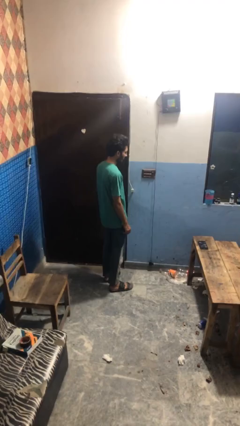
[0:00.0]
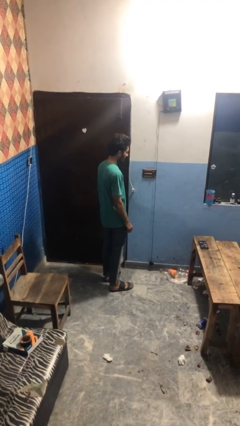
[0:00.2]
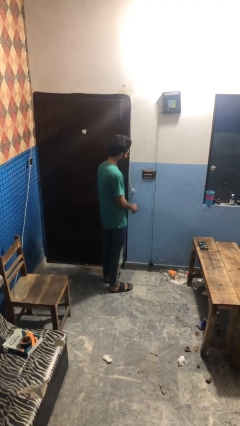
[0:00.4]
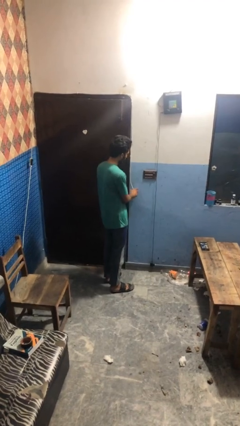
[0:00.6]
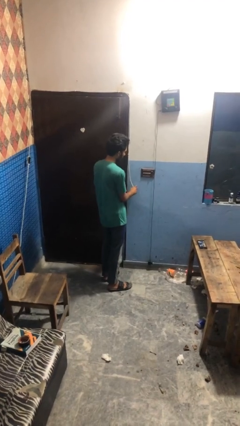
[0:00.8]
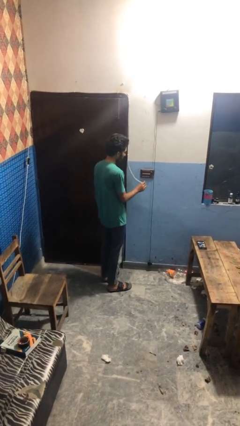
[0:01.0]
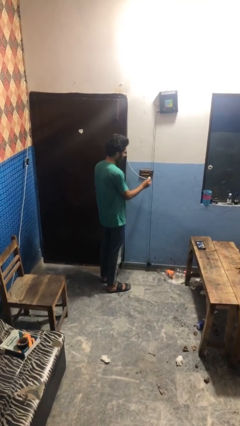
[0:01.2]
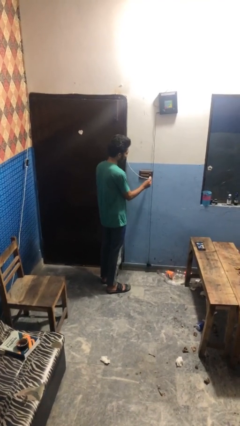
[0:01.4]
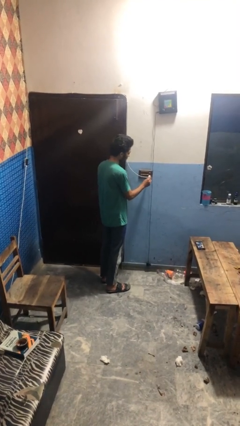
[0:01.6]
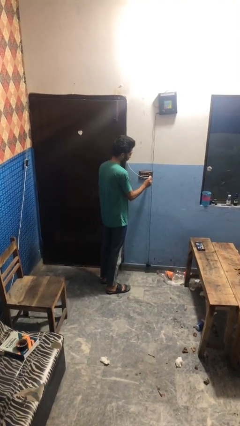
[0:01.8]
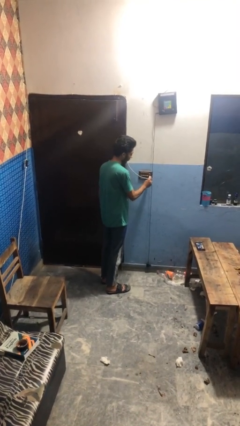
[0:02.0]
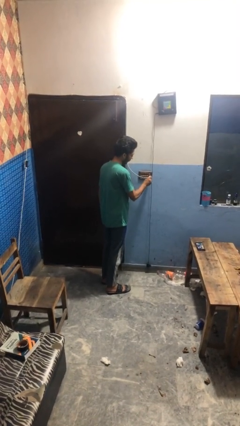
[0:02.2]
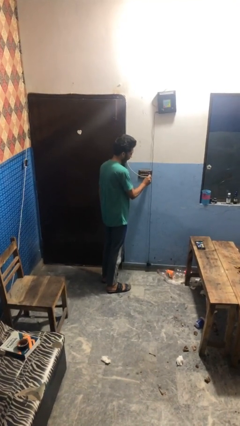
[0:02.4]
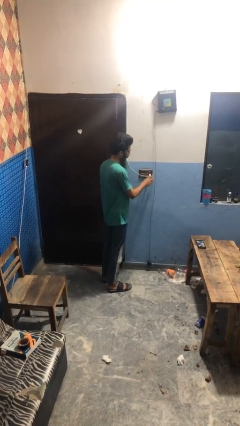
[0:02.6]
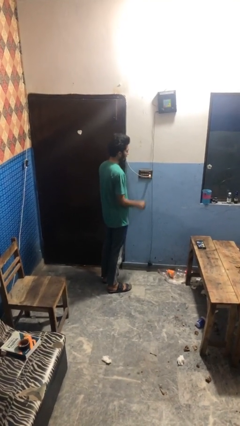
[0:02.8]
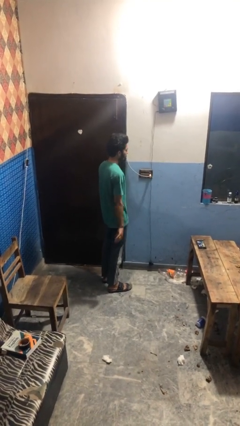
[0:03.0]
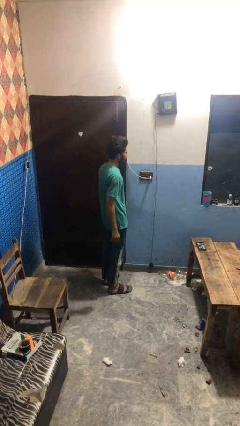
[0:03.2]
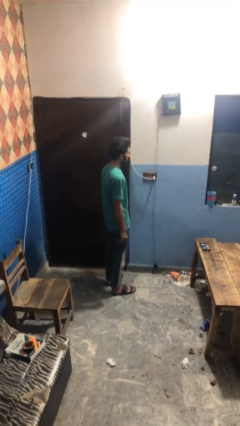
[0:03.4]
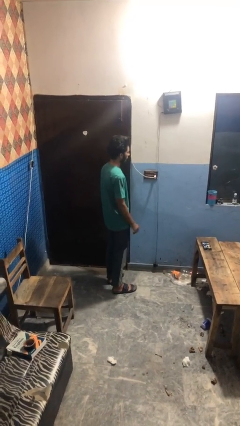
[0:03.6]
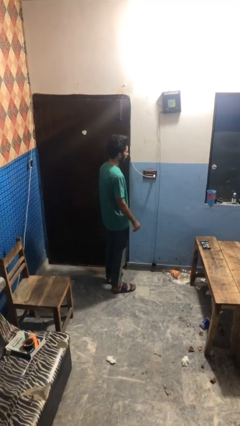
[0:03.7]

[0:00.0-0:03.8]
person plugs into electrical socket

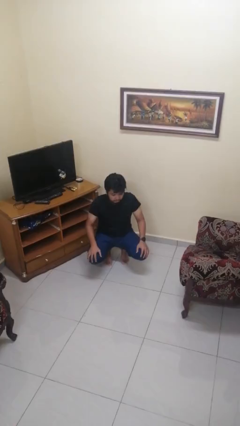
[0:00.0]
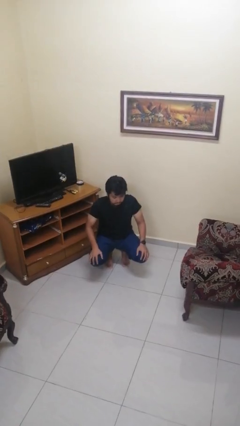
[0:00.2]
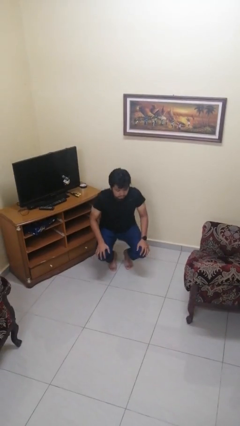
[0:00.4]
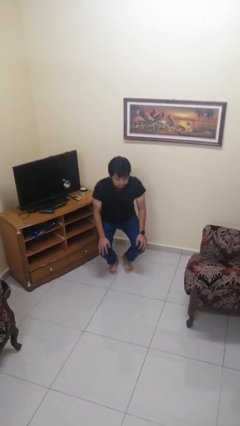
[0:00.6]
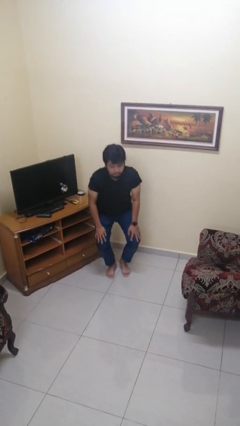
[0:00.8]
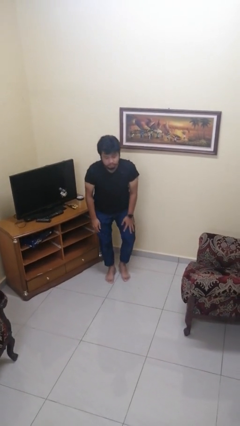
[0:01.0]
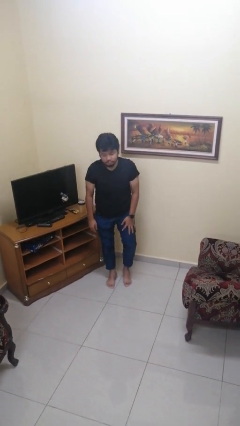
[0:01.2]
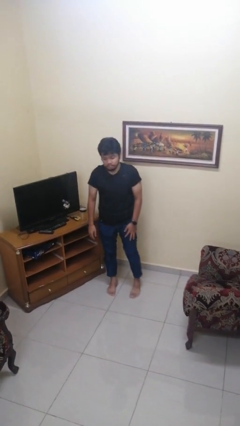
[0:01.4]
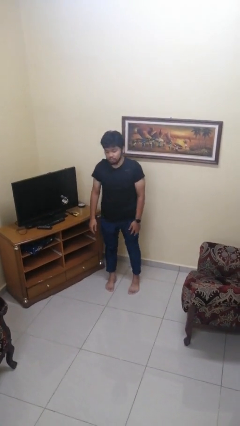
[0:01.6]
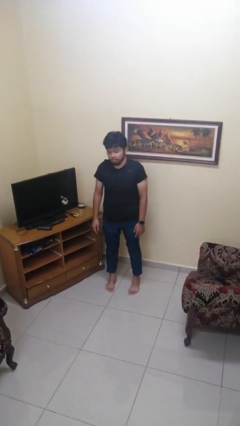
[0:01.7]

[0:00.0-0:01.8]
person stands up

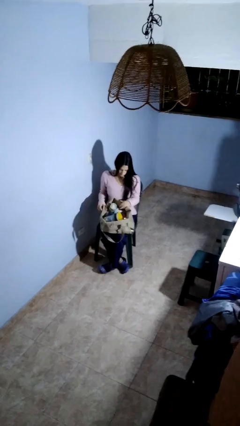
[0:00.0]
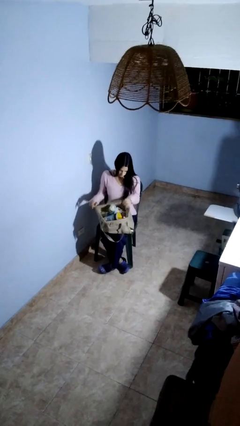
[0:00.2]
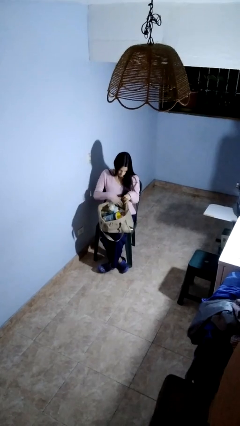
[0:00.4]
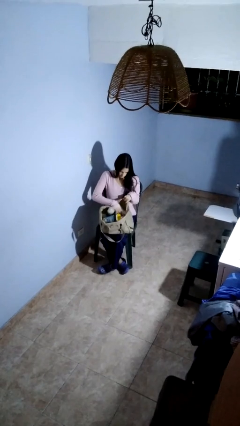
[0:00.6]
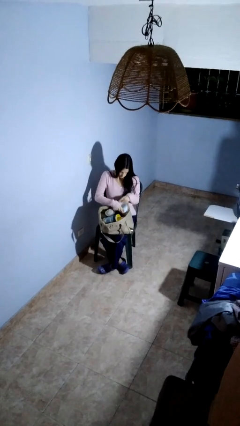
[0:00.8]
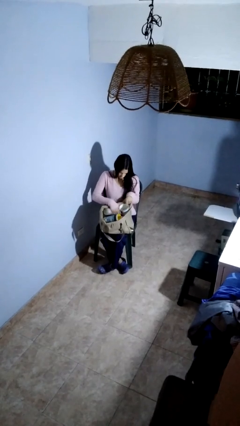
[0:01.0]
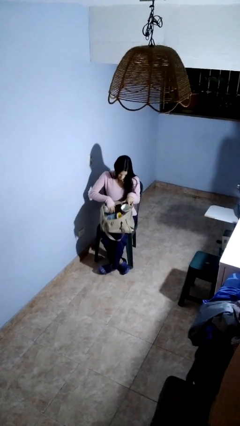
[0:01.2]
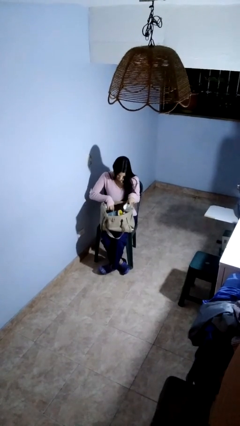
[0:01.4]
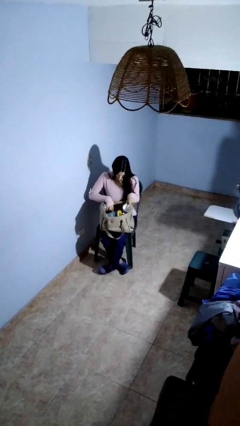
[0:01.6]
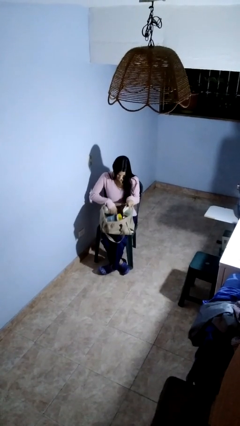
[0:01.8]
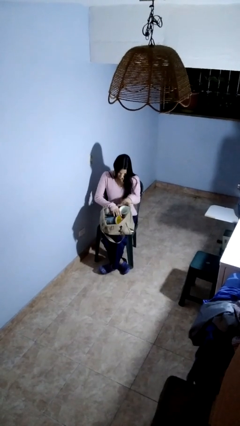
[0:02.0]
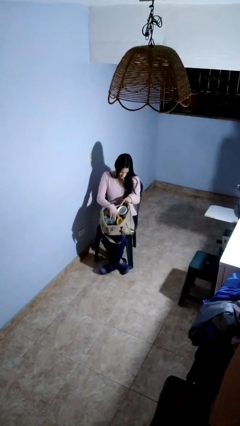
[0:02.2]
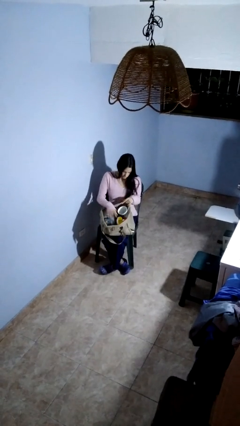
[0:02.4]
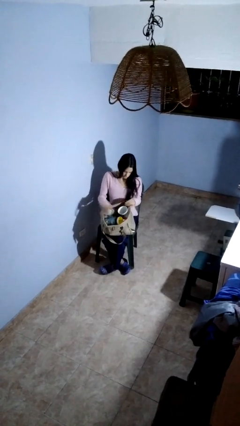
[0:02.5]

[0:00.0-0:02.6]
person searches in bag

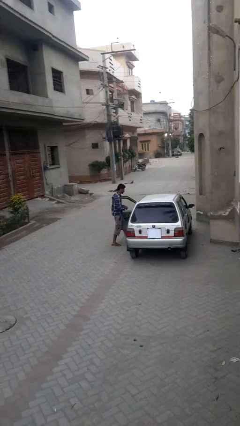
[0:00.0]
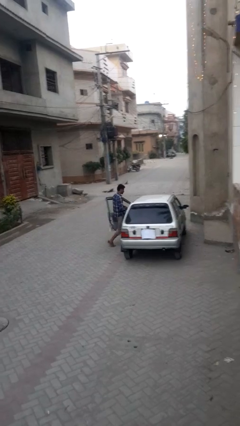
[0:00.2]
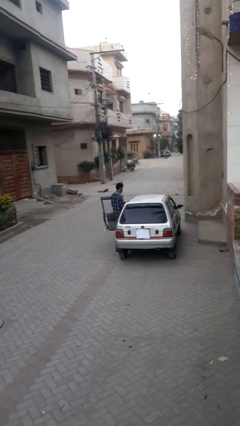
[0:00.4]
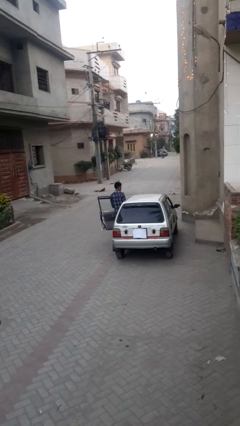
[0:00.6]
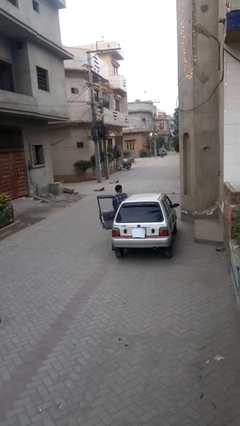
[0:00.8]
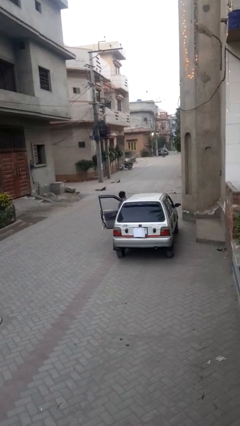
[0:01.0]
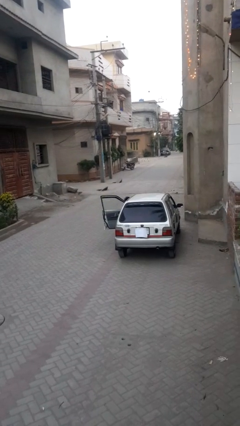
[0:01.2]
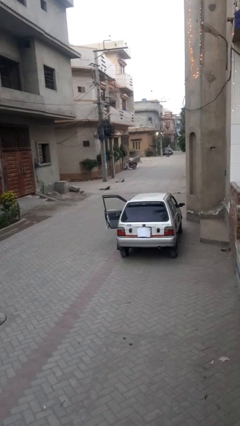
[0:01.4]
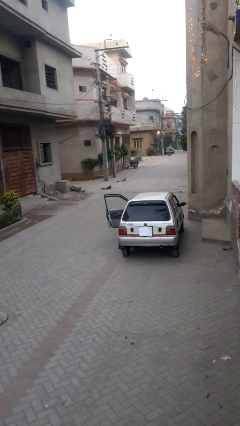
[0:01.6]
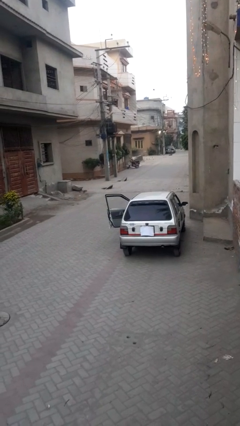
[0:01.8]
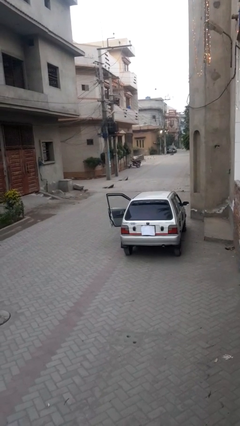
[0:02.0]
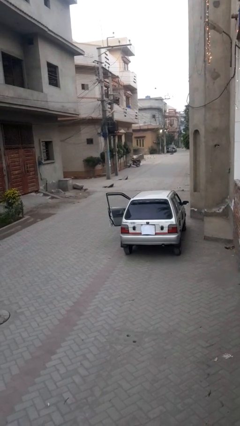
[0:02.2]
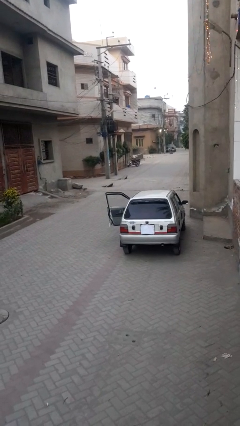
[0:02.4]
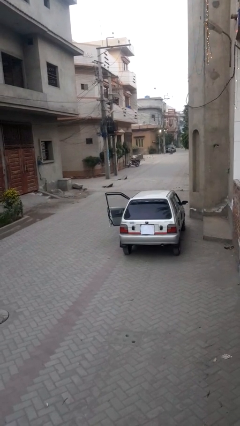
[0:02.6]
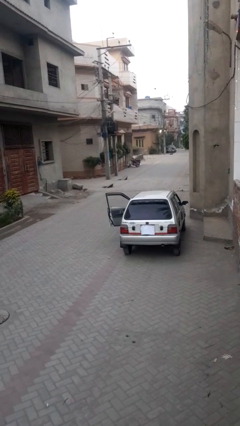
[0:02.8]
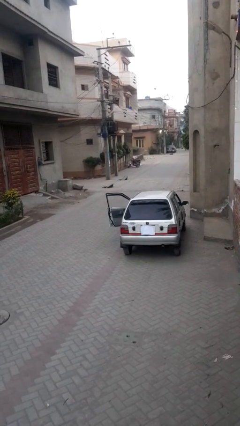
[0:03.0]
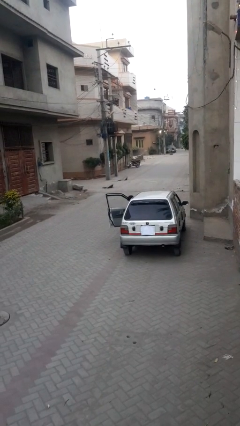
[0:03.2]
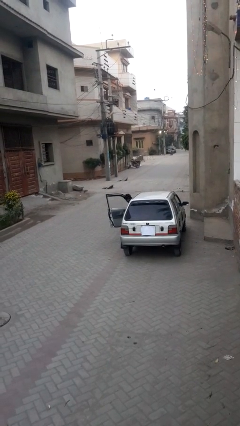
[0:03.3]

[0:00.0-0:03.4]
person enters car

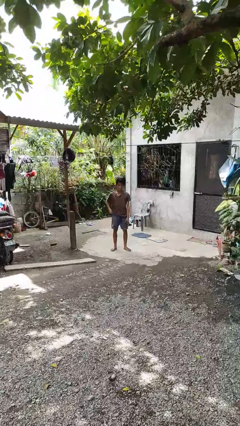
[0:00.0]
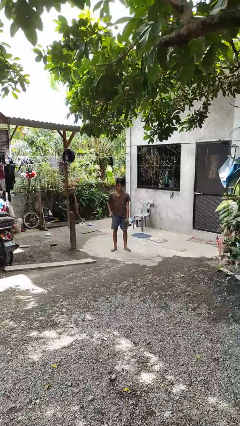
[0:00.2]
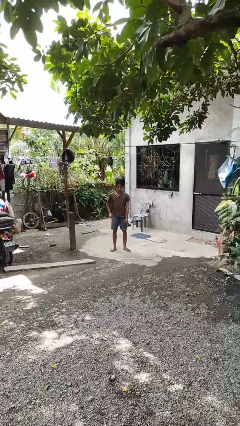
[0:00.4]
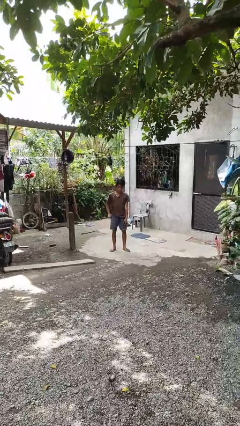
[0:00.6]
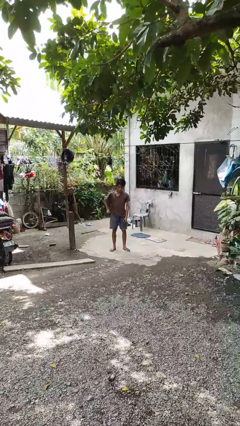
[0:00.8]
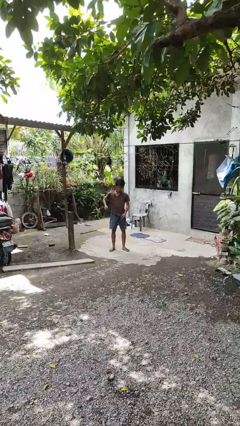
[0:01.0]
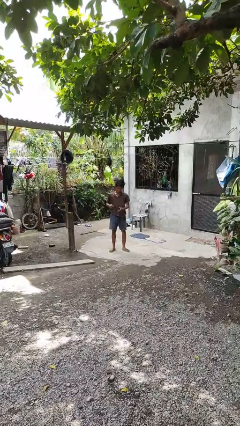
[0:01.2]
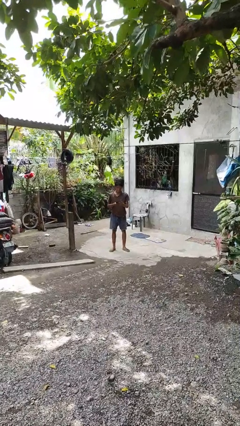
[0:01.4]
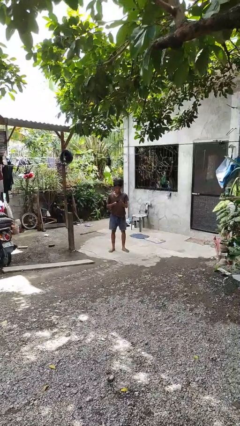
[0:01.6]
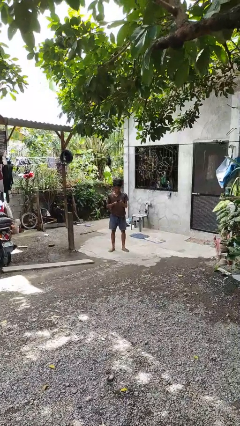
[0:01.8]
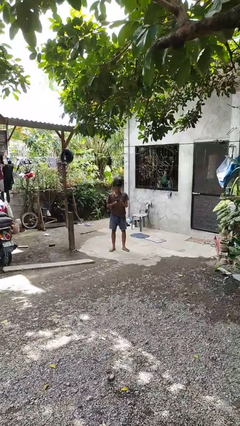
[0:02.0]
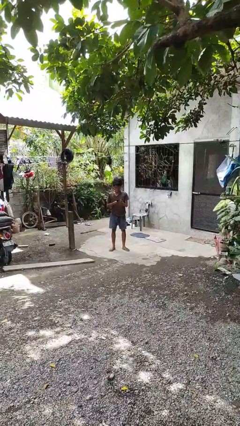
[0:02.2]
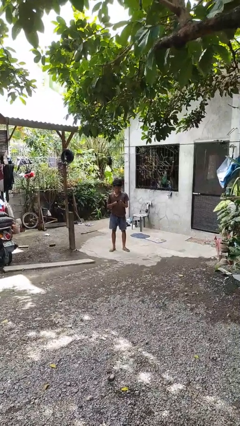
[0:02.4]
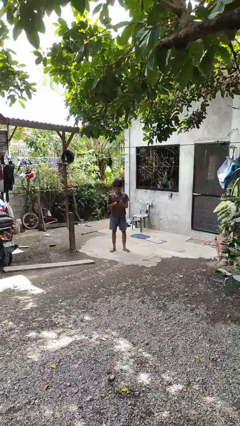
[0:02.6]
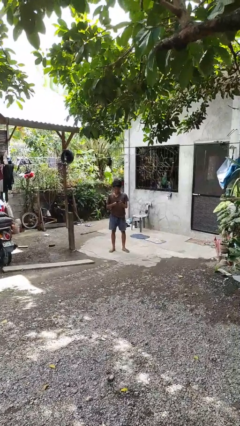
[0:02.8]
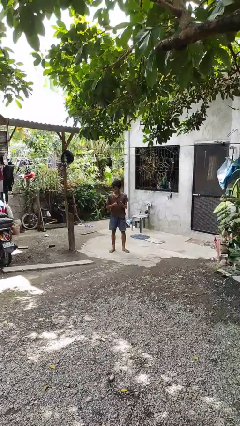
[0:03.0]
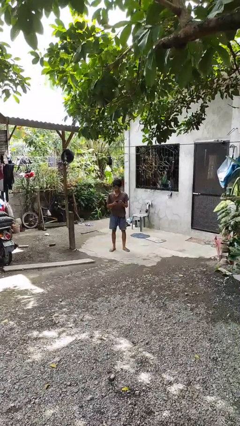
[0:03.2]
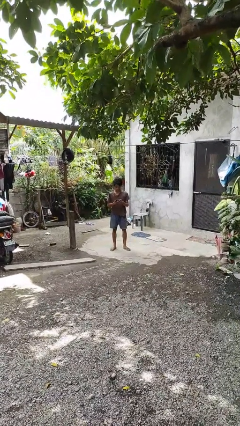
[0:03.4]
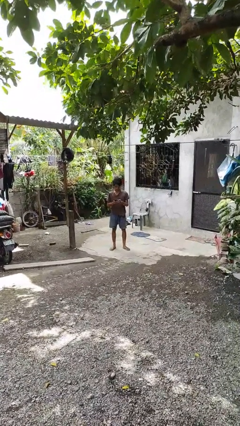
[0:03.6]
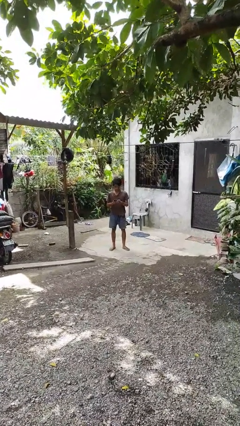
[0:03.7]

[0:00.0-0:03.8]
person takes phone from pocket

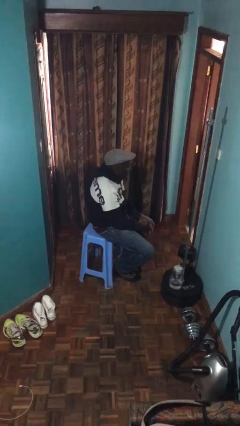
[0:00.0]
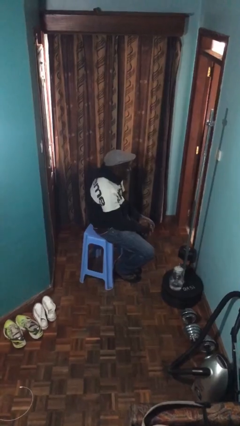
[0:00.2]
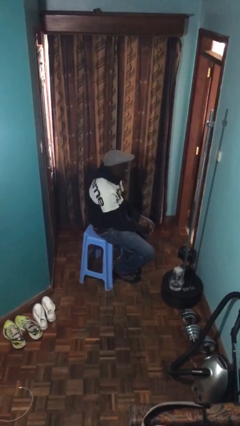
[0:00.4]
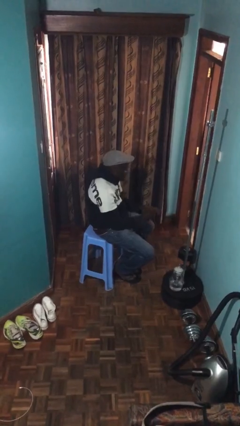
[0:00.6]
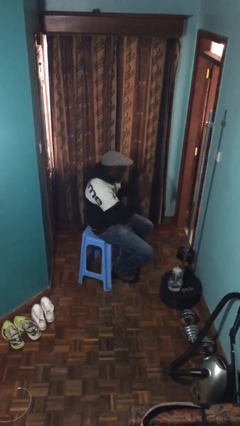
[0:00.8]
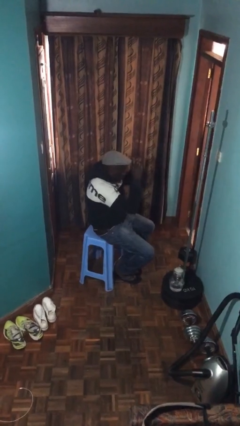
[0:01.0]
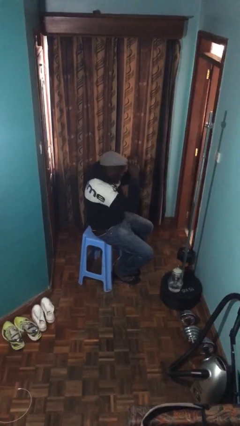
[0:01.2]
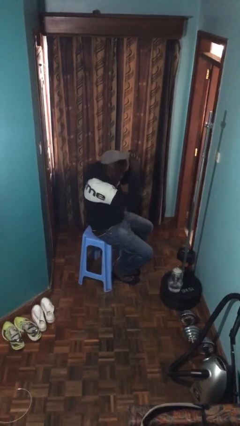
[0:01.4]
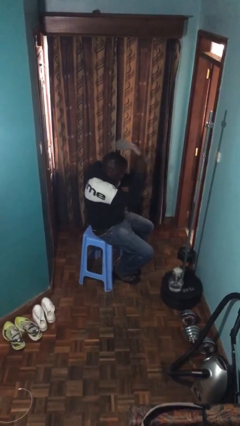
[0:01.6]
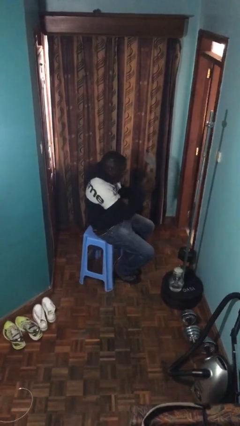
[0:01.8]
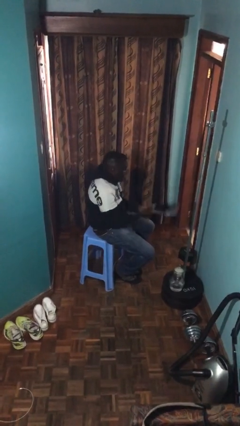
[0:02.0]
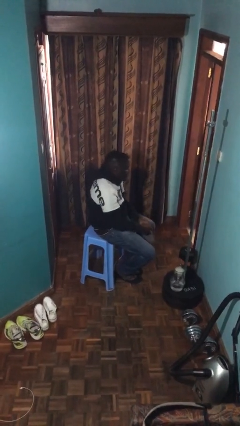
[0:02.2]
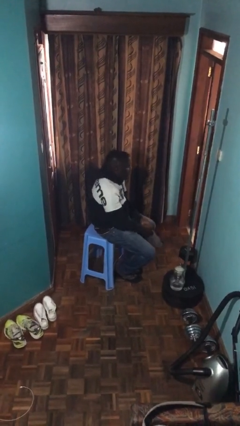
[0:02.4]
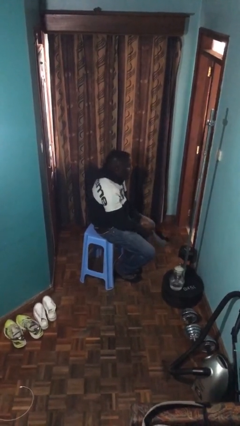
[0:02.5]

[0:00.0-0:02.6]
person takes off hat
